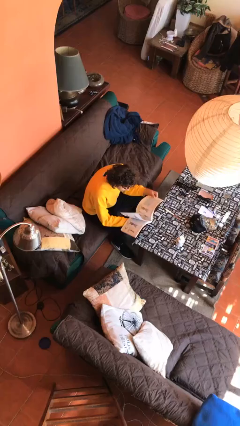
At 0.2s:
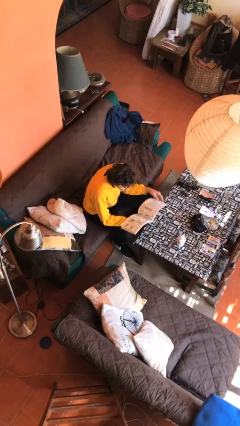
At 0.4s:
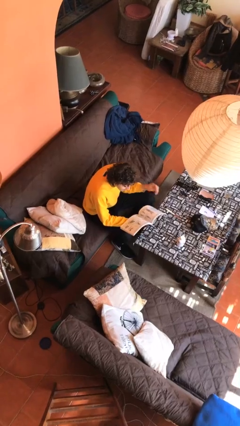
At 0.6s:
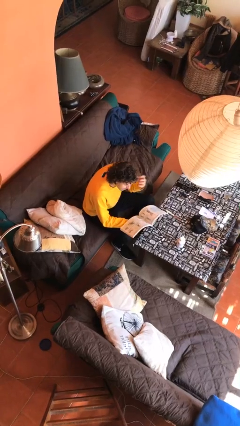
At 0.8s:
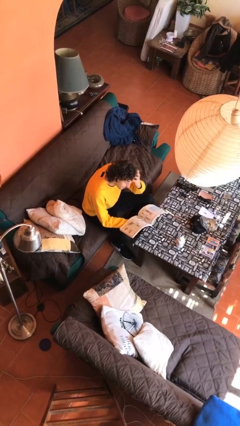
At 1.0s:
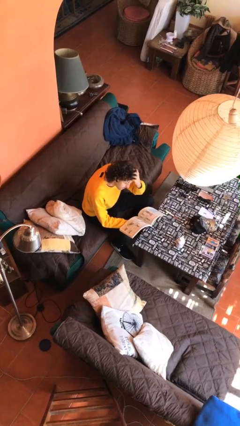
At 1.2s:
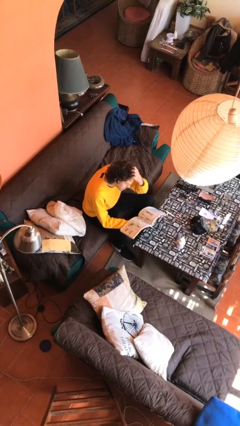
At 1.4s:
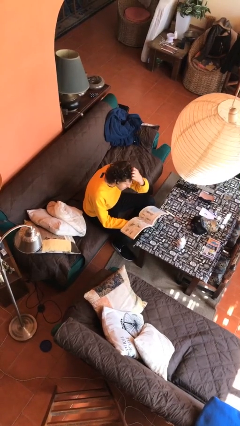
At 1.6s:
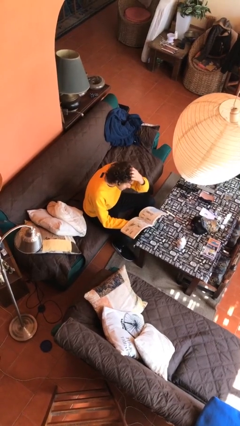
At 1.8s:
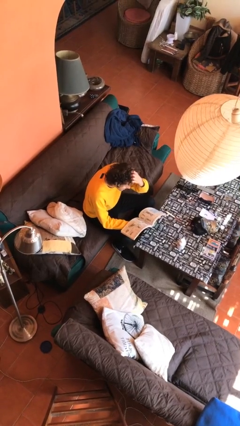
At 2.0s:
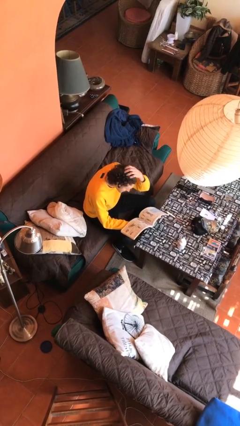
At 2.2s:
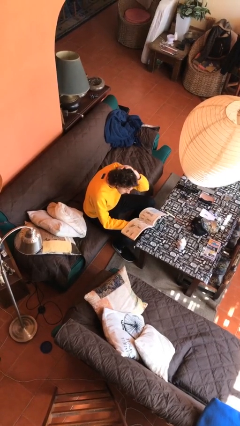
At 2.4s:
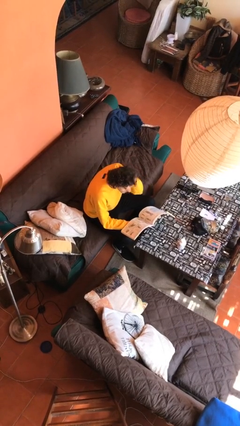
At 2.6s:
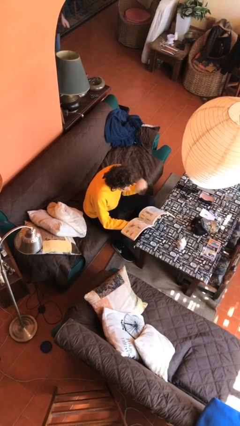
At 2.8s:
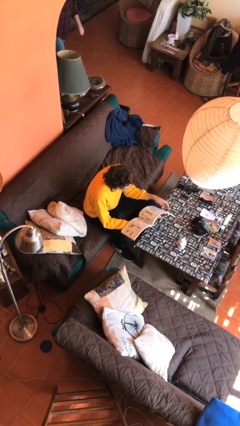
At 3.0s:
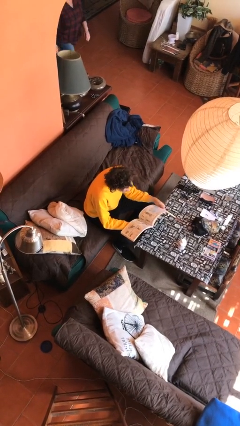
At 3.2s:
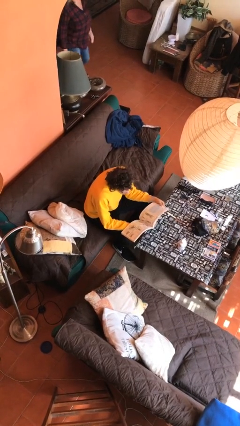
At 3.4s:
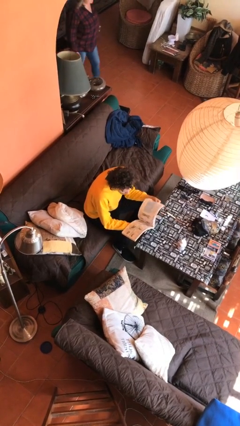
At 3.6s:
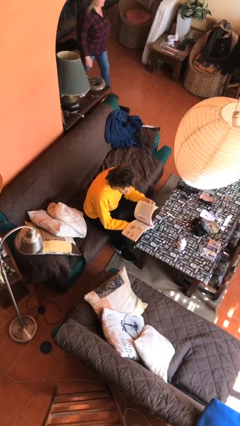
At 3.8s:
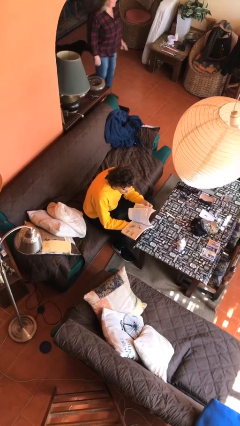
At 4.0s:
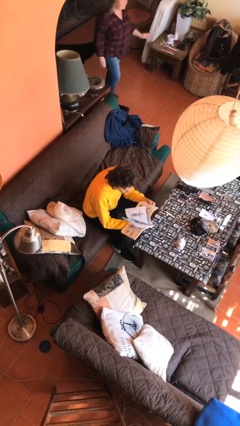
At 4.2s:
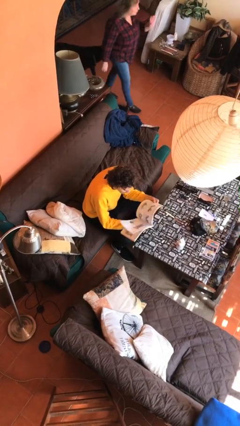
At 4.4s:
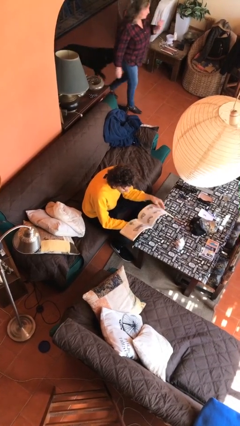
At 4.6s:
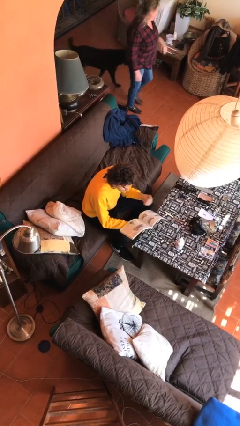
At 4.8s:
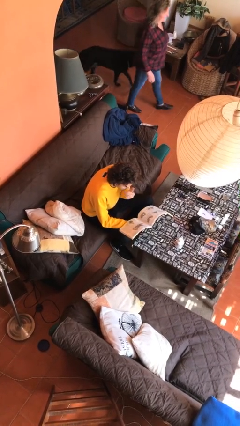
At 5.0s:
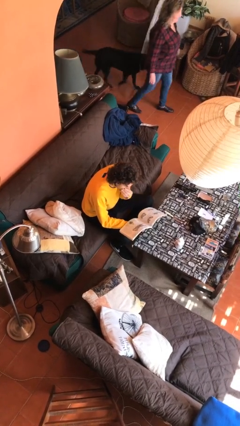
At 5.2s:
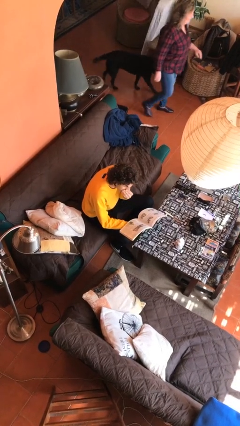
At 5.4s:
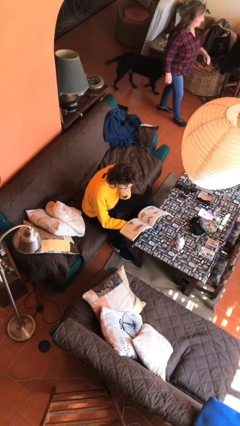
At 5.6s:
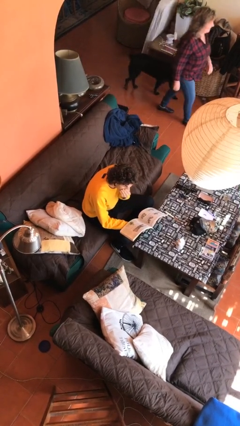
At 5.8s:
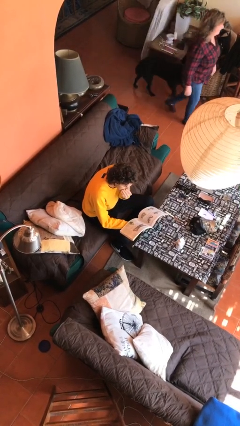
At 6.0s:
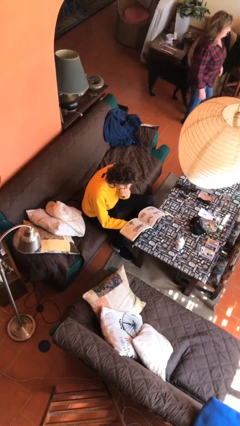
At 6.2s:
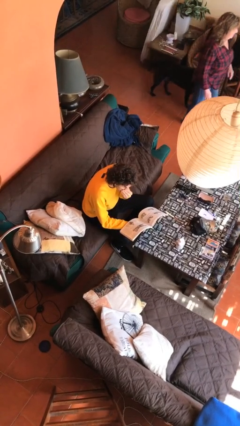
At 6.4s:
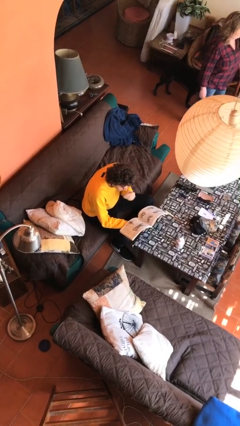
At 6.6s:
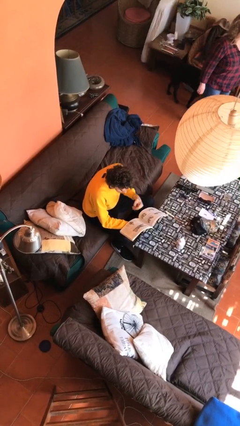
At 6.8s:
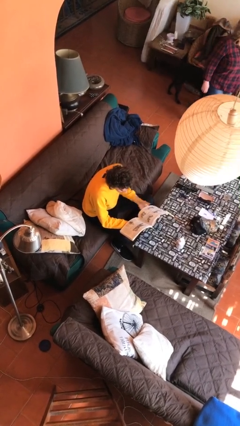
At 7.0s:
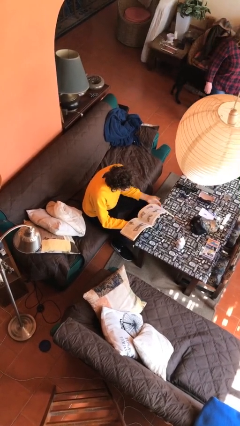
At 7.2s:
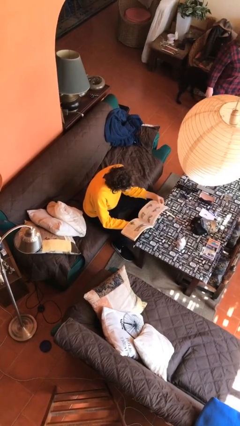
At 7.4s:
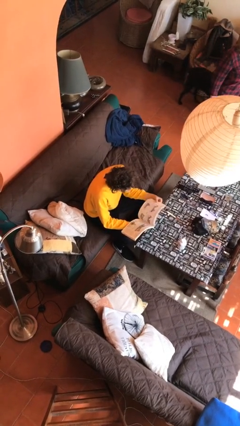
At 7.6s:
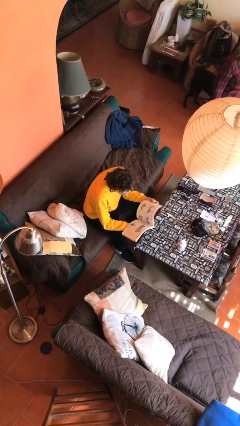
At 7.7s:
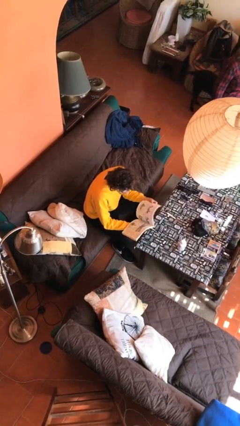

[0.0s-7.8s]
person reads document

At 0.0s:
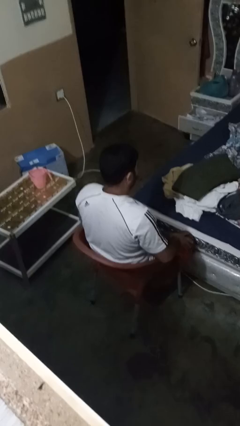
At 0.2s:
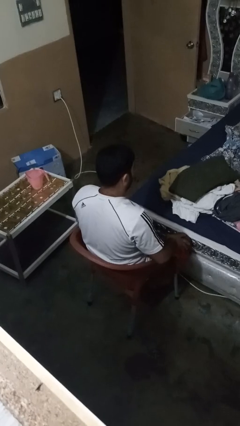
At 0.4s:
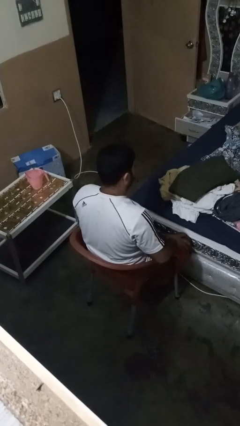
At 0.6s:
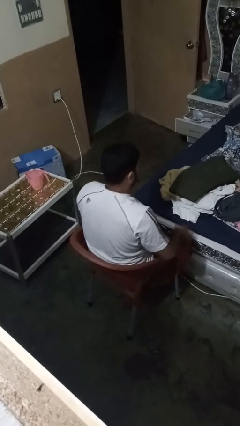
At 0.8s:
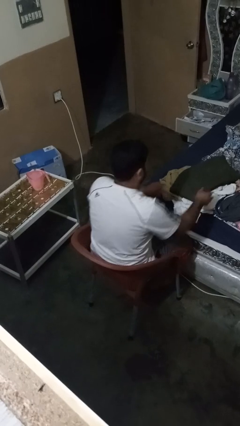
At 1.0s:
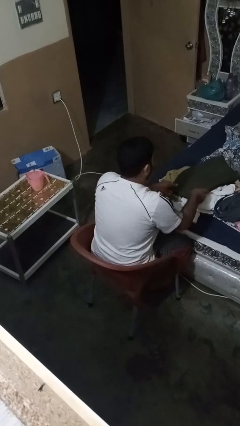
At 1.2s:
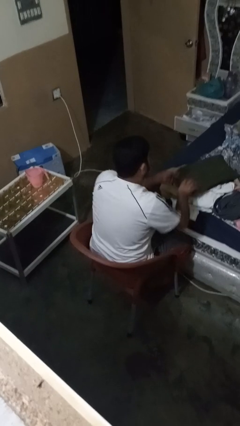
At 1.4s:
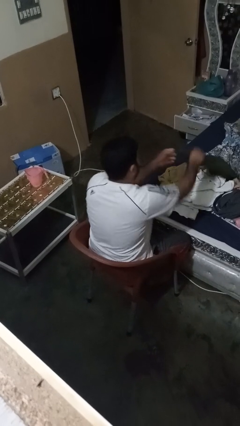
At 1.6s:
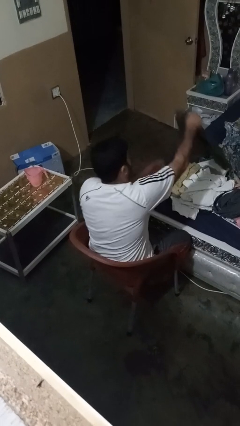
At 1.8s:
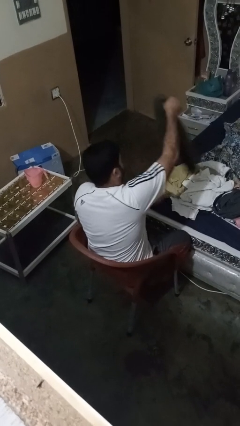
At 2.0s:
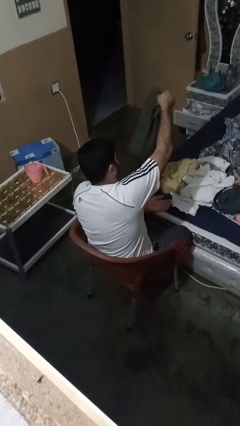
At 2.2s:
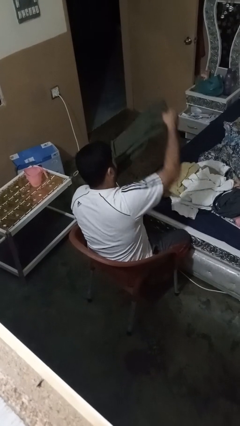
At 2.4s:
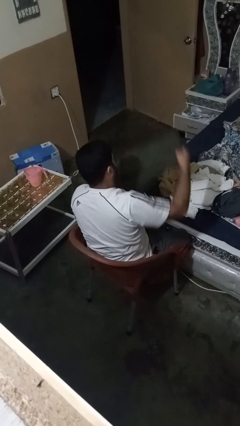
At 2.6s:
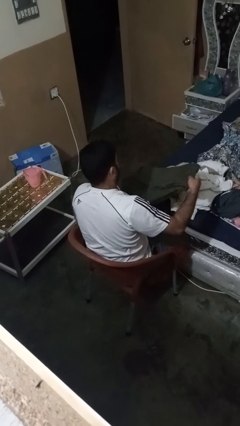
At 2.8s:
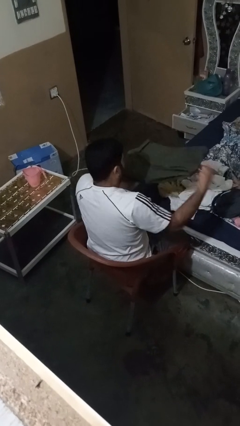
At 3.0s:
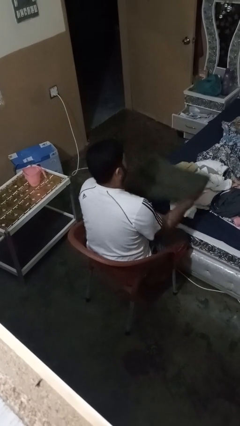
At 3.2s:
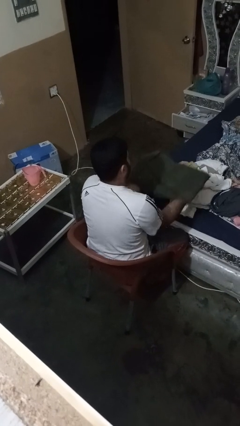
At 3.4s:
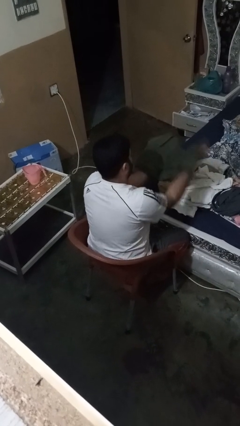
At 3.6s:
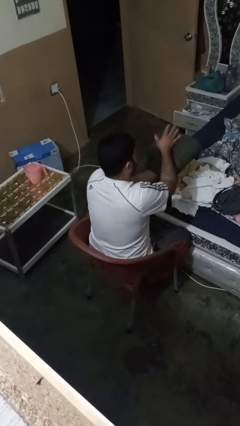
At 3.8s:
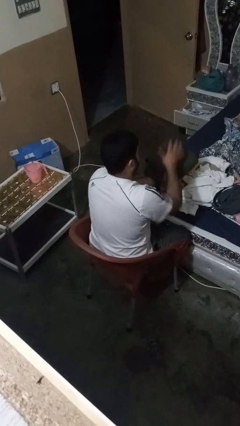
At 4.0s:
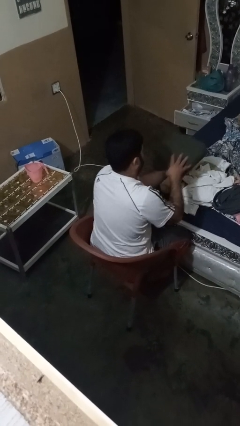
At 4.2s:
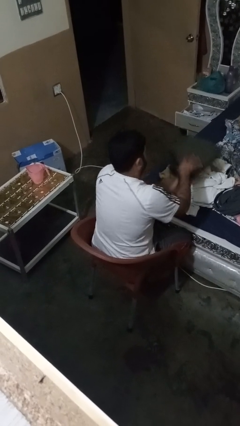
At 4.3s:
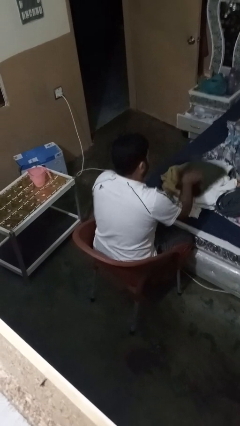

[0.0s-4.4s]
person folds pants

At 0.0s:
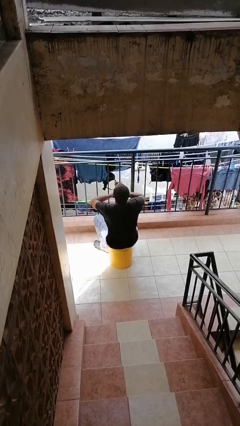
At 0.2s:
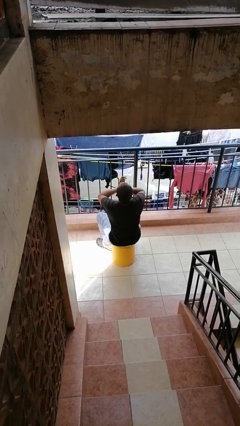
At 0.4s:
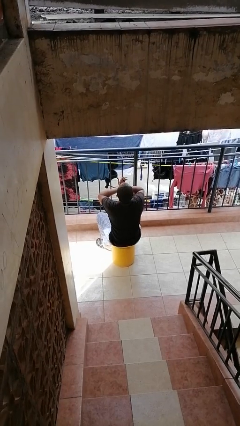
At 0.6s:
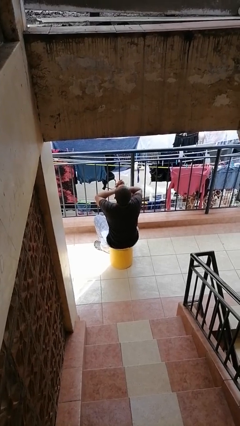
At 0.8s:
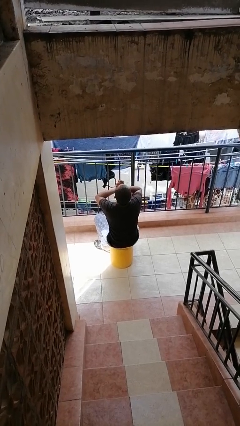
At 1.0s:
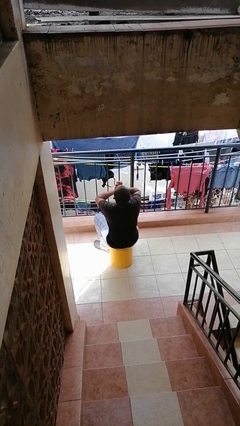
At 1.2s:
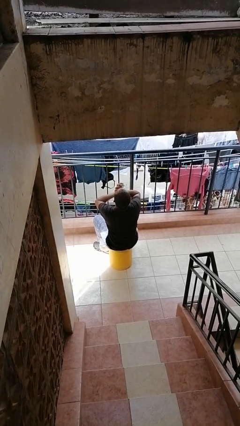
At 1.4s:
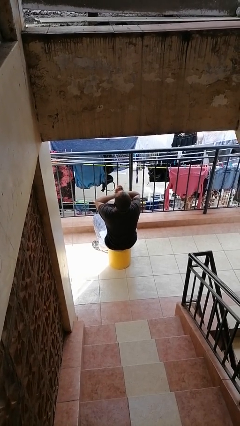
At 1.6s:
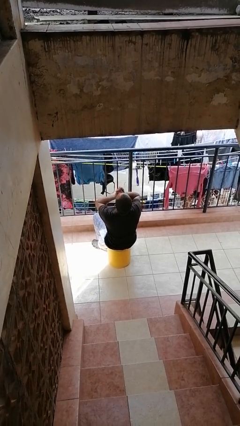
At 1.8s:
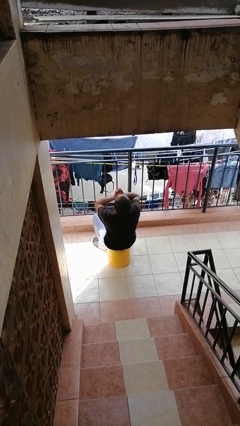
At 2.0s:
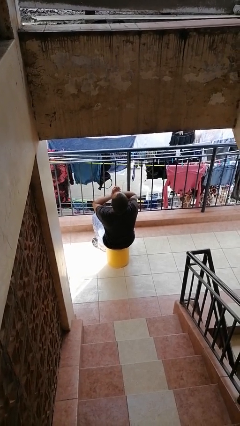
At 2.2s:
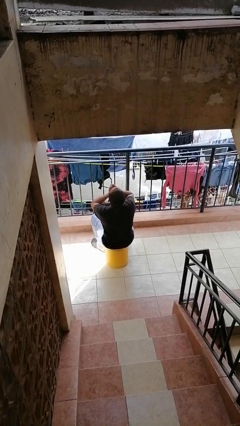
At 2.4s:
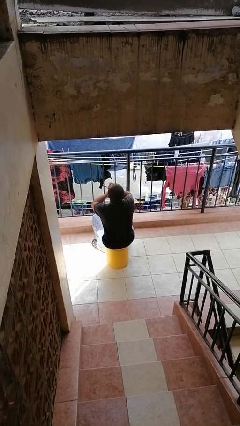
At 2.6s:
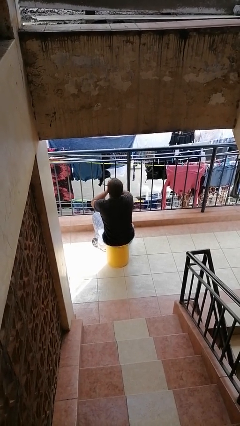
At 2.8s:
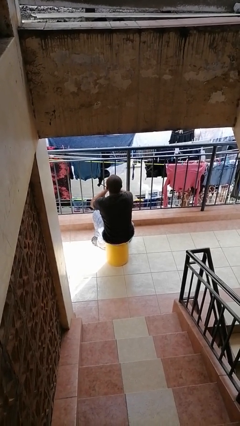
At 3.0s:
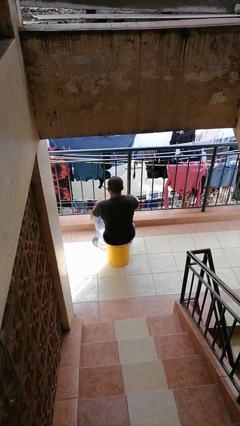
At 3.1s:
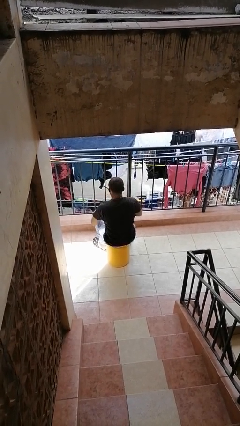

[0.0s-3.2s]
person blows into hands

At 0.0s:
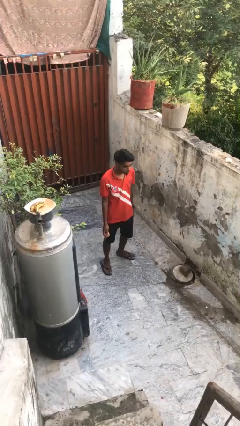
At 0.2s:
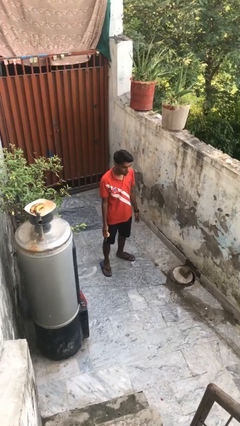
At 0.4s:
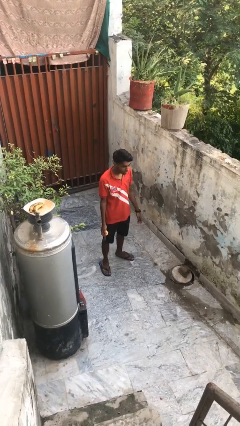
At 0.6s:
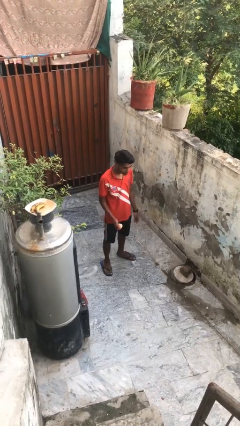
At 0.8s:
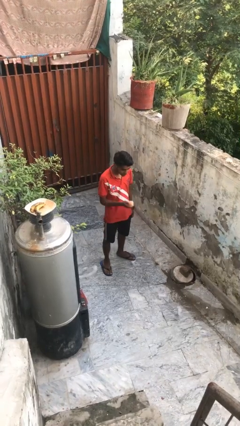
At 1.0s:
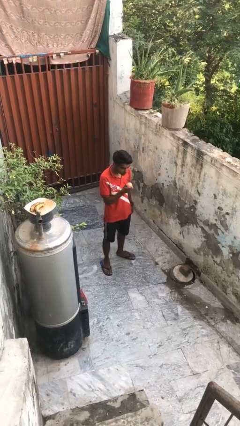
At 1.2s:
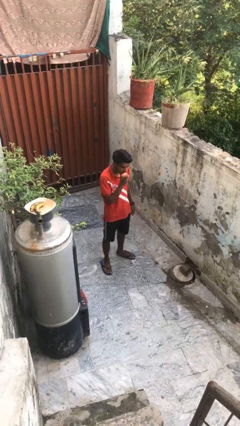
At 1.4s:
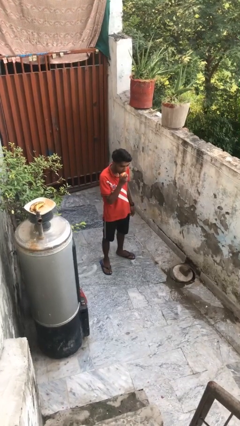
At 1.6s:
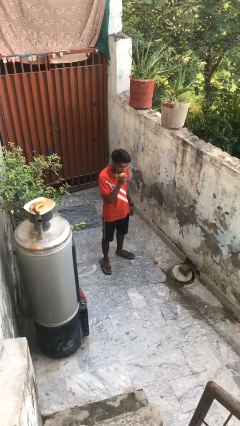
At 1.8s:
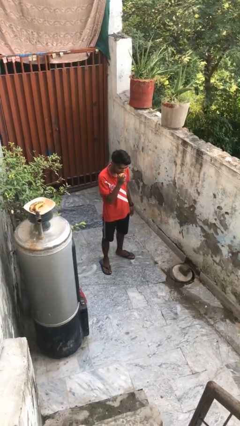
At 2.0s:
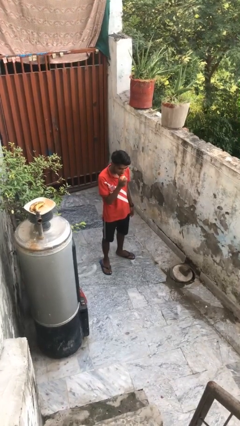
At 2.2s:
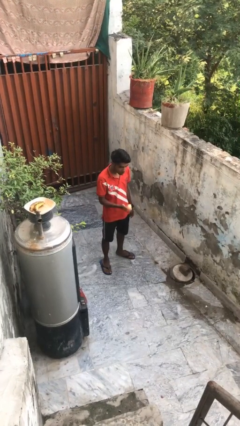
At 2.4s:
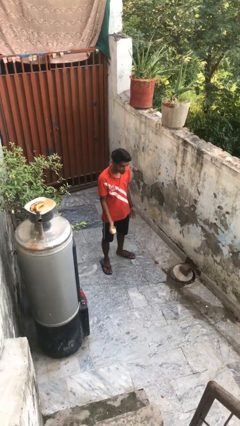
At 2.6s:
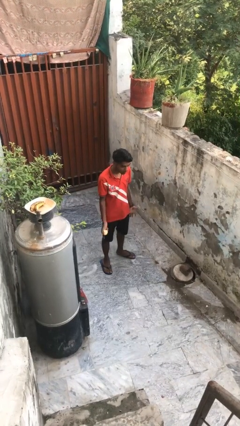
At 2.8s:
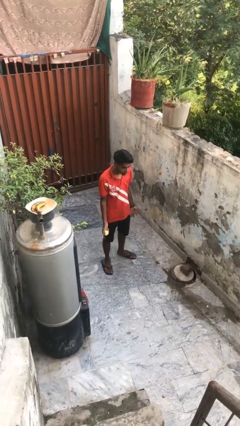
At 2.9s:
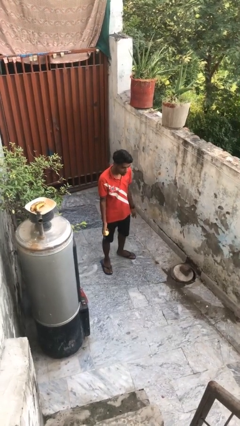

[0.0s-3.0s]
person eats apple
